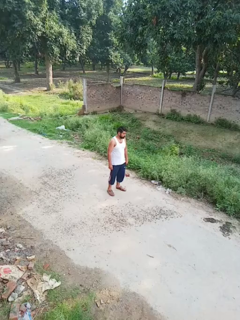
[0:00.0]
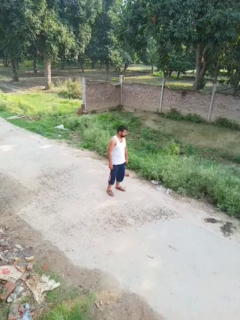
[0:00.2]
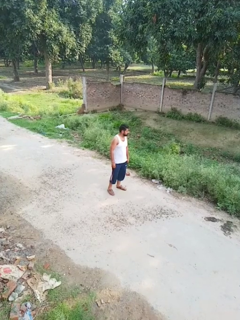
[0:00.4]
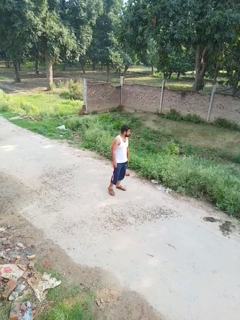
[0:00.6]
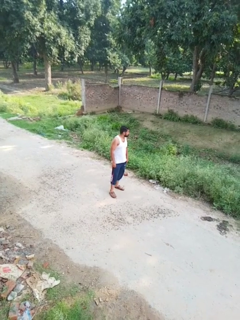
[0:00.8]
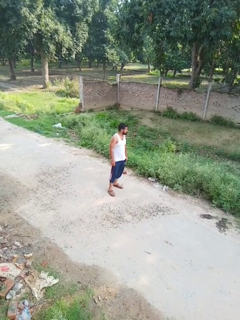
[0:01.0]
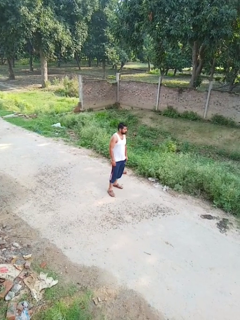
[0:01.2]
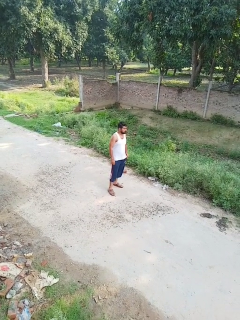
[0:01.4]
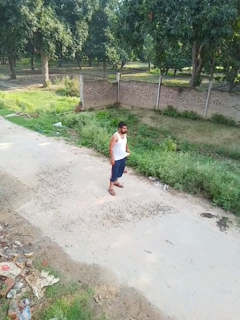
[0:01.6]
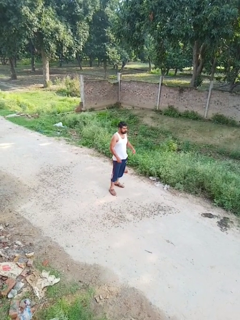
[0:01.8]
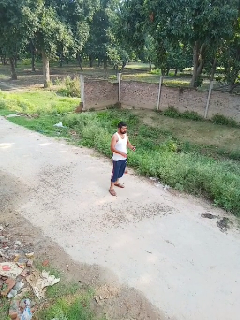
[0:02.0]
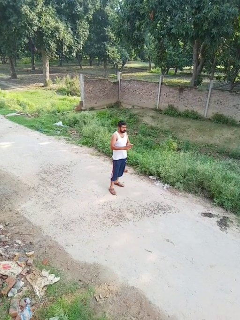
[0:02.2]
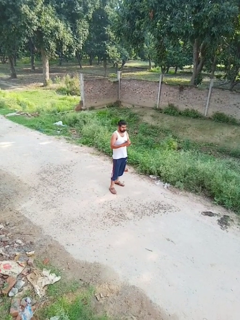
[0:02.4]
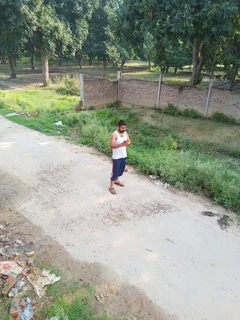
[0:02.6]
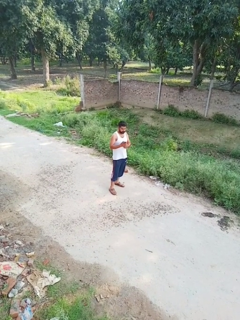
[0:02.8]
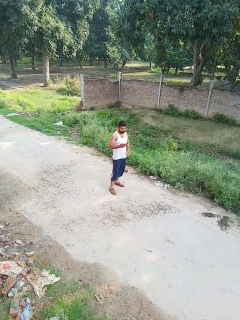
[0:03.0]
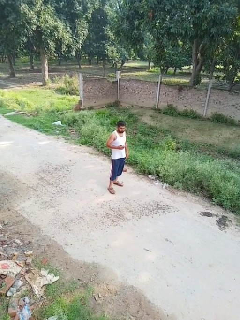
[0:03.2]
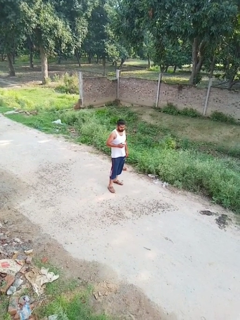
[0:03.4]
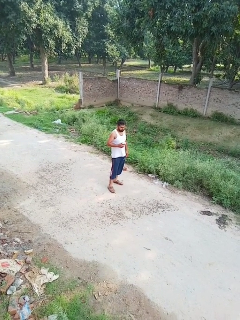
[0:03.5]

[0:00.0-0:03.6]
person takes phone from pocket

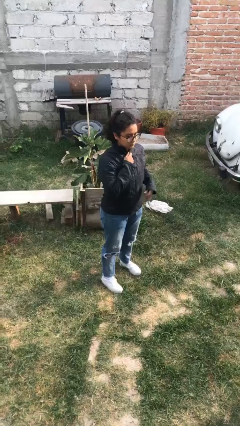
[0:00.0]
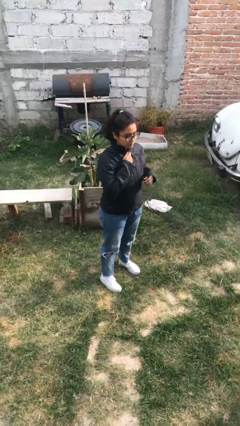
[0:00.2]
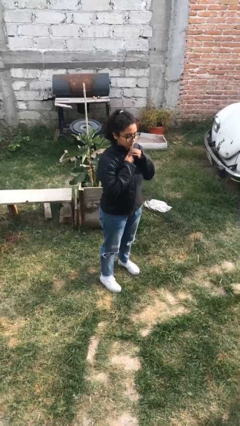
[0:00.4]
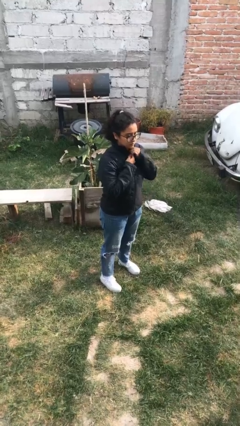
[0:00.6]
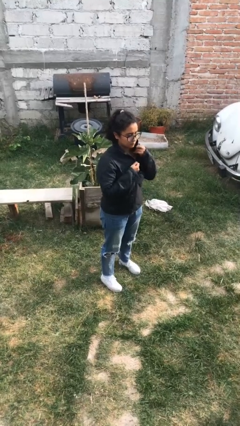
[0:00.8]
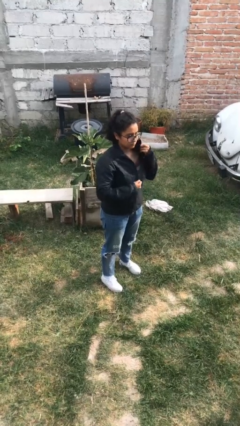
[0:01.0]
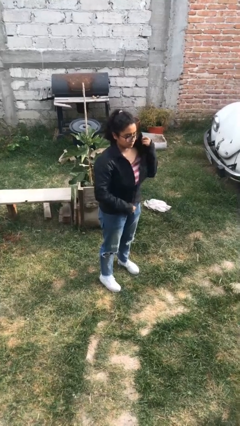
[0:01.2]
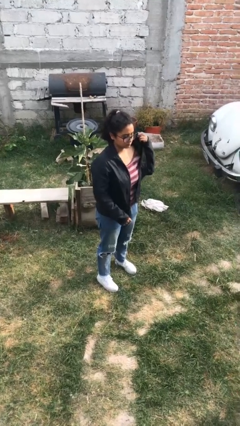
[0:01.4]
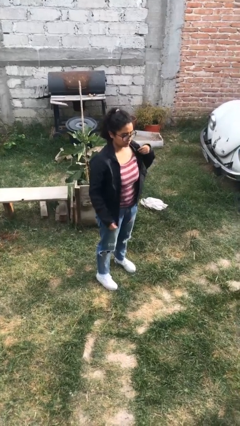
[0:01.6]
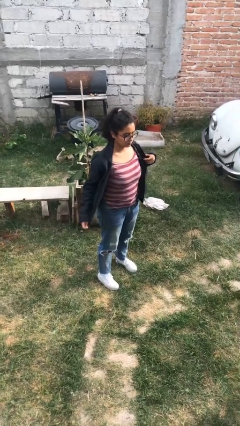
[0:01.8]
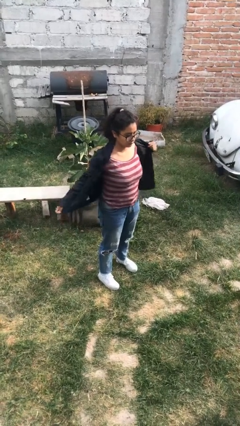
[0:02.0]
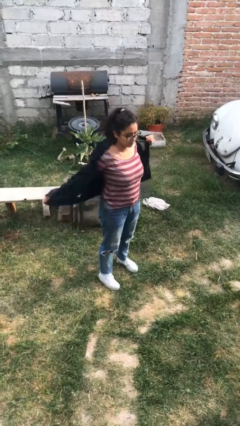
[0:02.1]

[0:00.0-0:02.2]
person unzips jacket

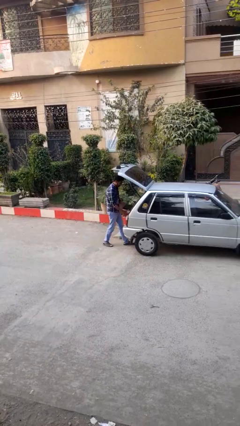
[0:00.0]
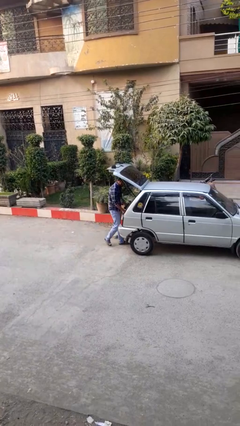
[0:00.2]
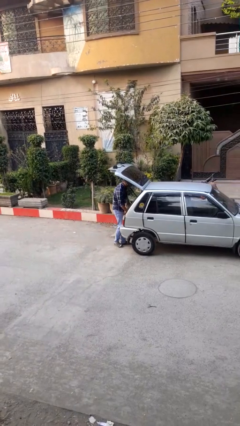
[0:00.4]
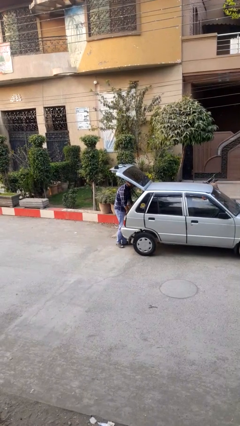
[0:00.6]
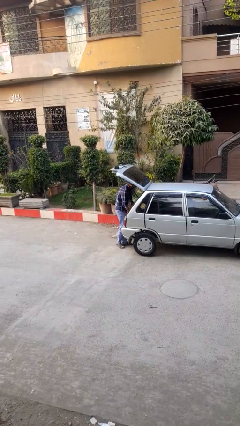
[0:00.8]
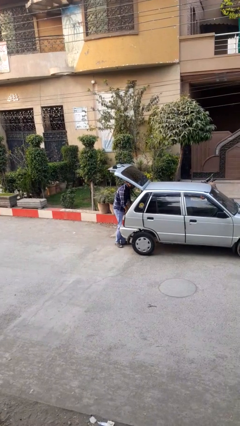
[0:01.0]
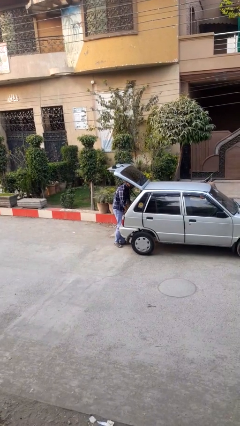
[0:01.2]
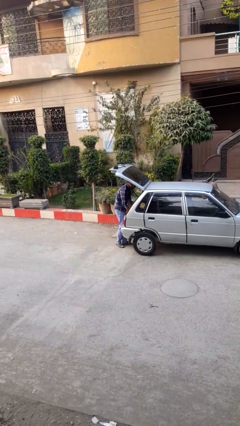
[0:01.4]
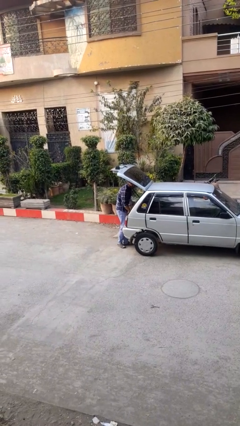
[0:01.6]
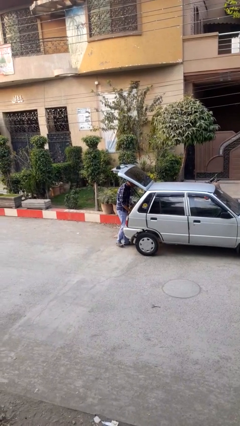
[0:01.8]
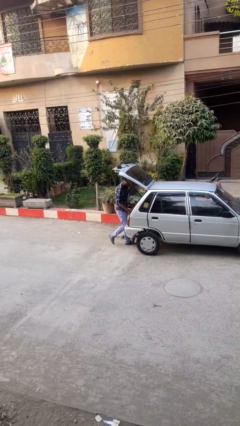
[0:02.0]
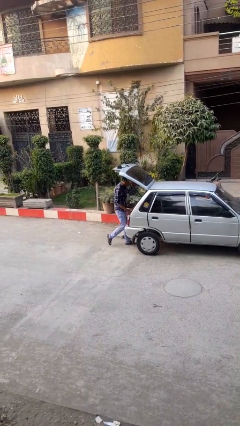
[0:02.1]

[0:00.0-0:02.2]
person loads car

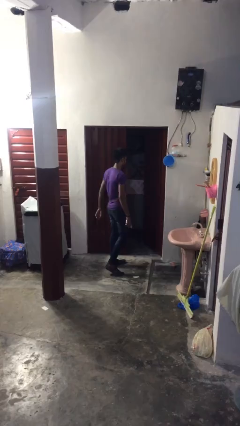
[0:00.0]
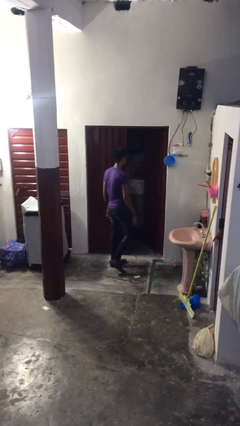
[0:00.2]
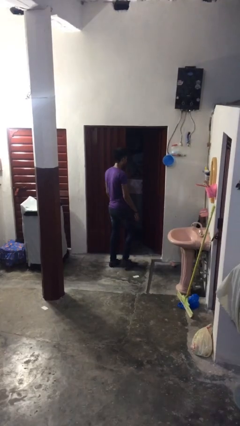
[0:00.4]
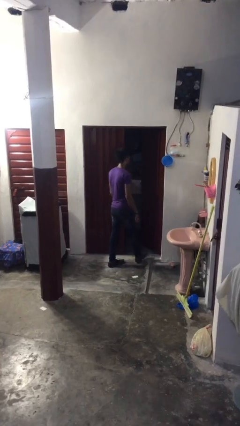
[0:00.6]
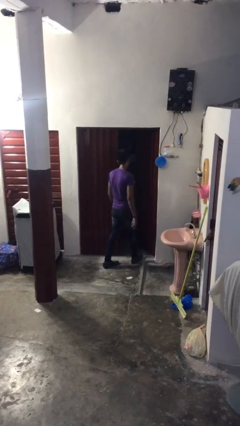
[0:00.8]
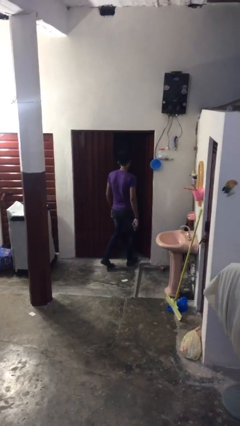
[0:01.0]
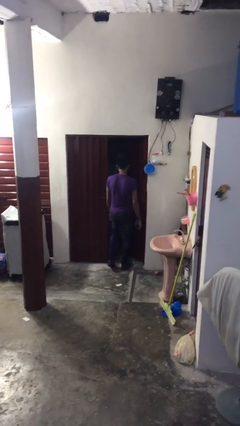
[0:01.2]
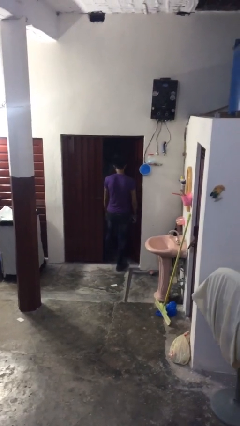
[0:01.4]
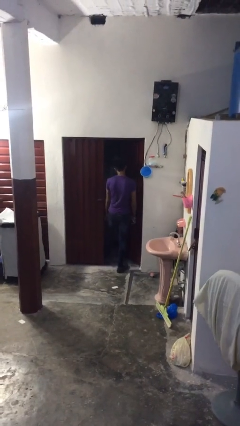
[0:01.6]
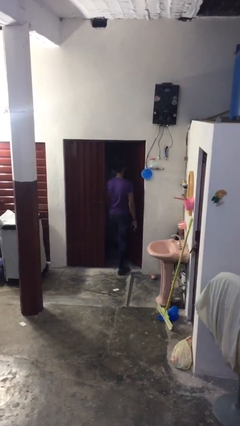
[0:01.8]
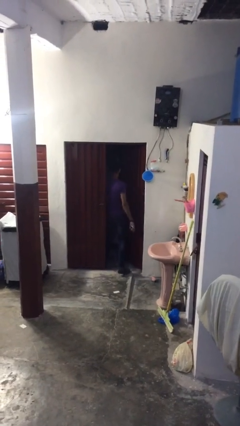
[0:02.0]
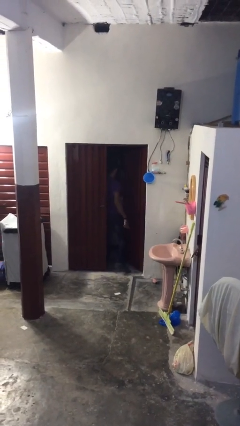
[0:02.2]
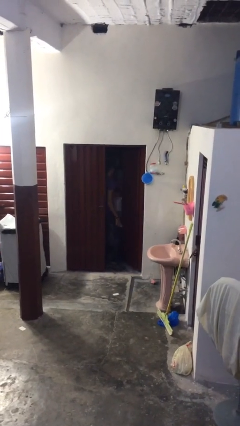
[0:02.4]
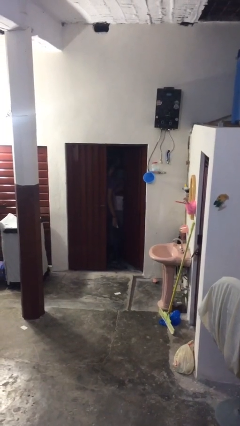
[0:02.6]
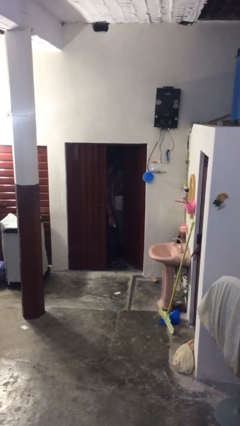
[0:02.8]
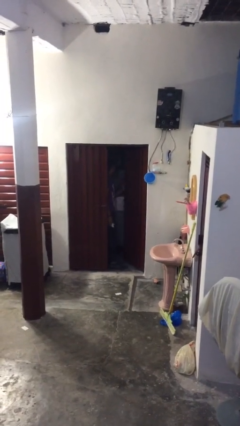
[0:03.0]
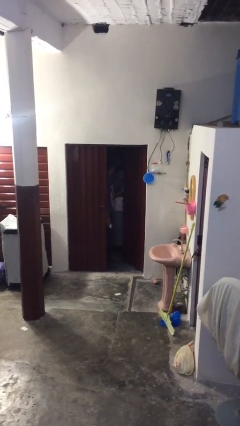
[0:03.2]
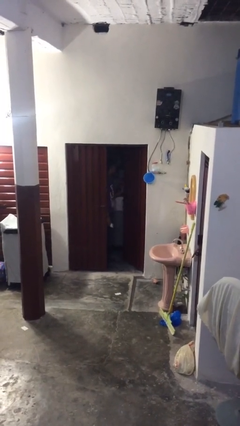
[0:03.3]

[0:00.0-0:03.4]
person exits scene through structure

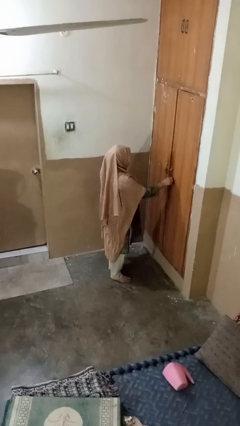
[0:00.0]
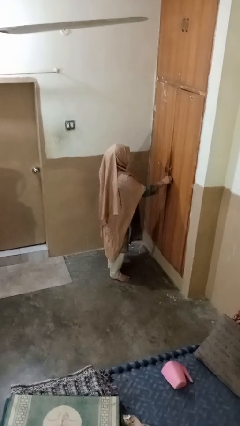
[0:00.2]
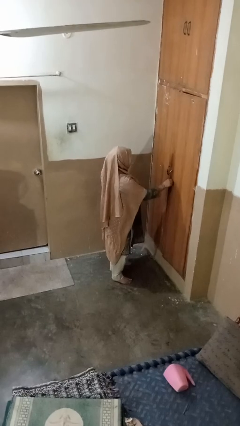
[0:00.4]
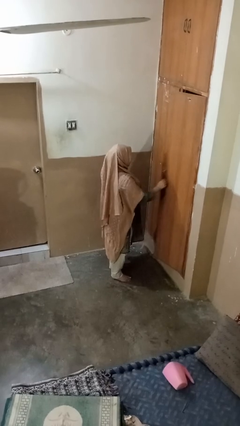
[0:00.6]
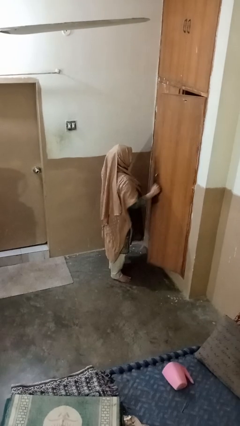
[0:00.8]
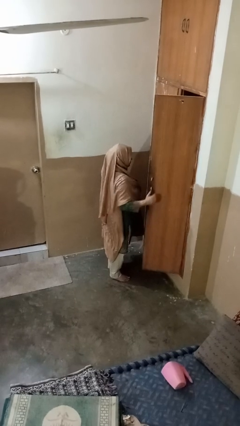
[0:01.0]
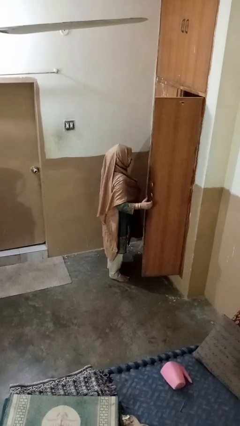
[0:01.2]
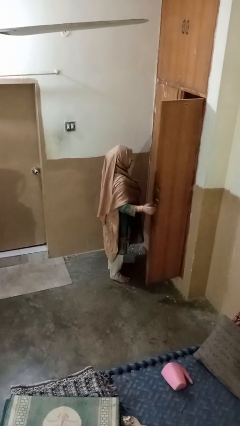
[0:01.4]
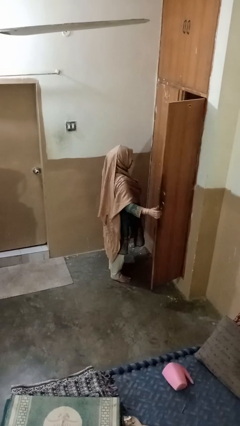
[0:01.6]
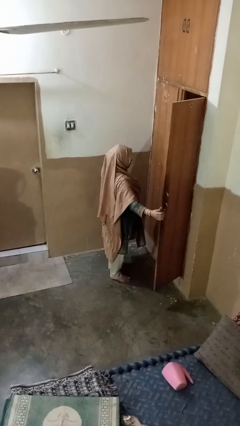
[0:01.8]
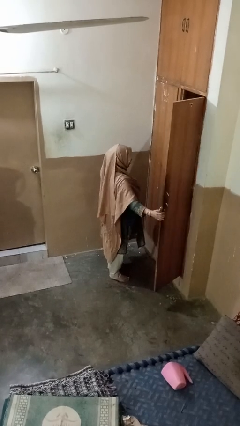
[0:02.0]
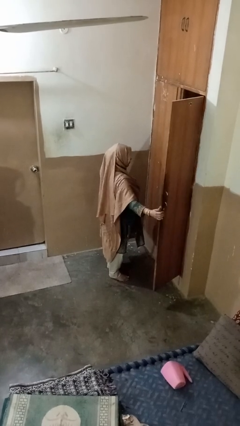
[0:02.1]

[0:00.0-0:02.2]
person opens closet door

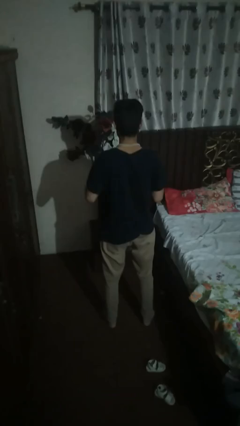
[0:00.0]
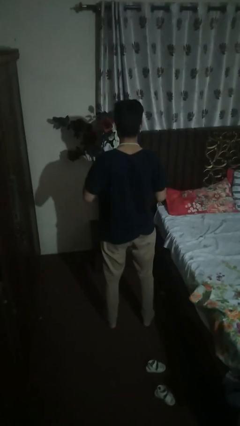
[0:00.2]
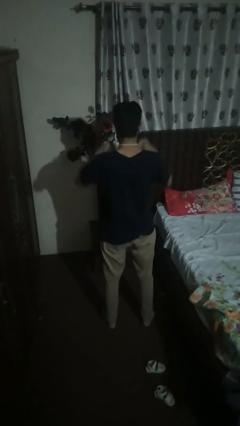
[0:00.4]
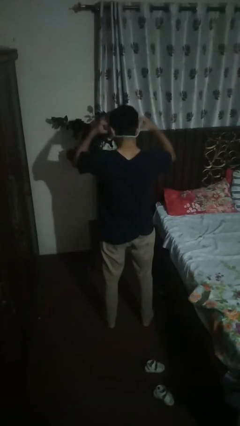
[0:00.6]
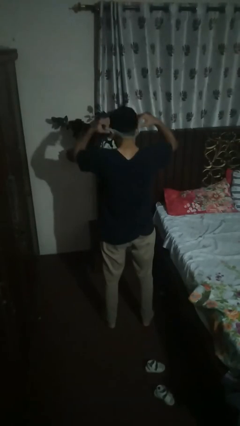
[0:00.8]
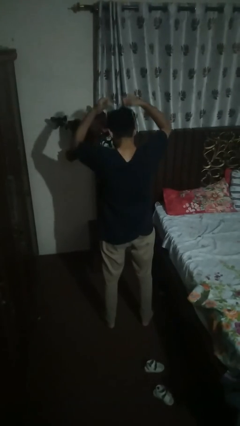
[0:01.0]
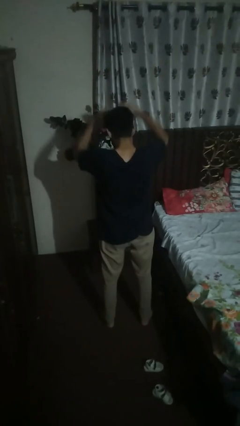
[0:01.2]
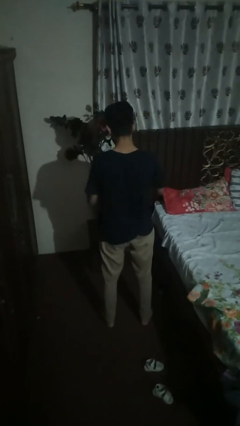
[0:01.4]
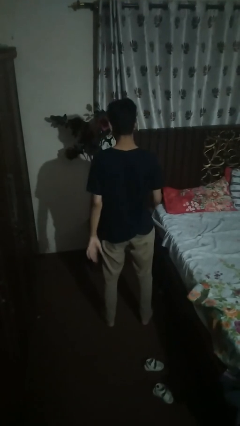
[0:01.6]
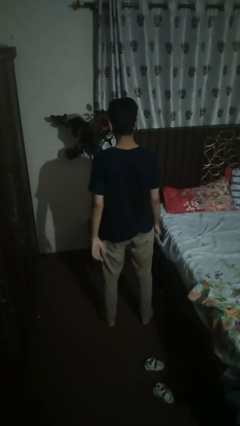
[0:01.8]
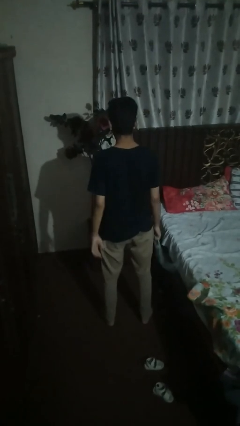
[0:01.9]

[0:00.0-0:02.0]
person takes off necklace

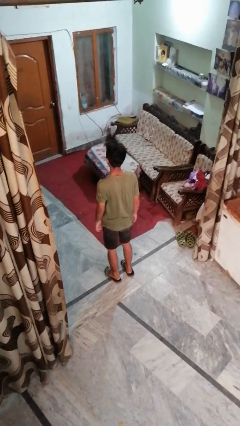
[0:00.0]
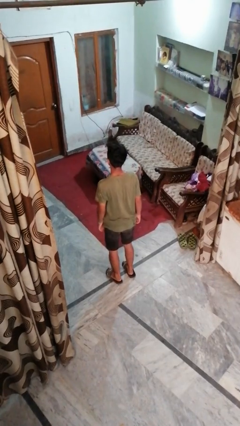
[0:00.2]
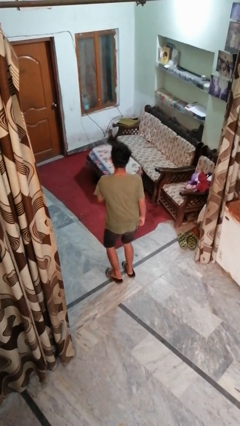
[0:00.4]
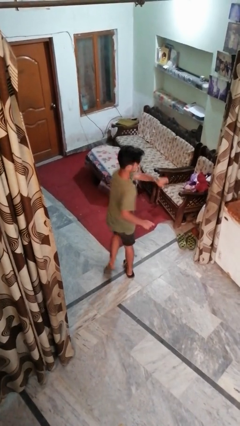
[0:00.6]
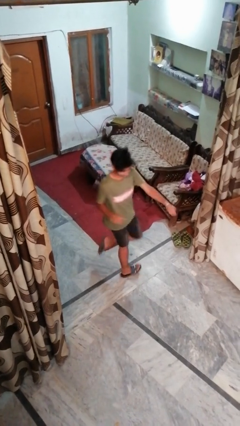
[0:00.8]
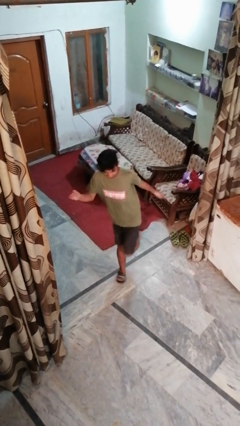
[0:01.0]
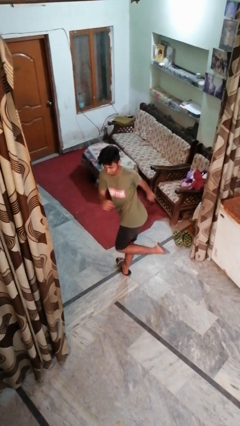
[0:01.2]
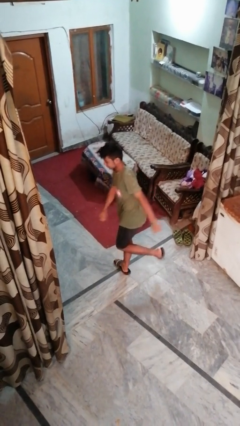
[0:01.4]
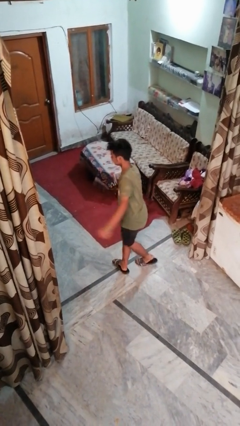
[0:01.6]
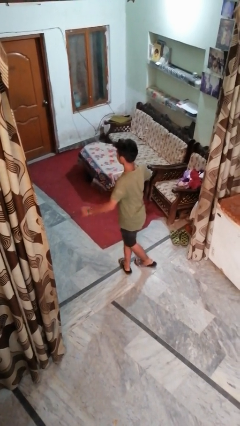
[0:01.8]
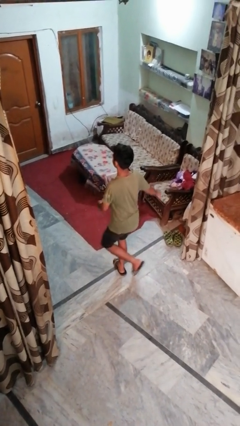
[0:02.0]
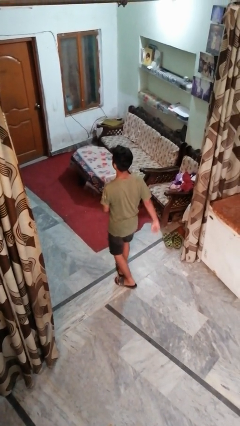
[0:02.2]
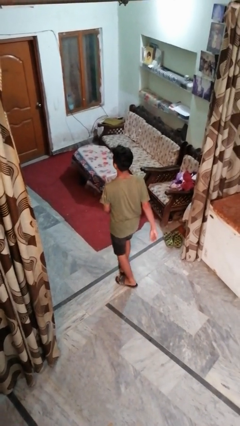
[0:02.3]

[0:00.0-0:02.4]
person twirls
